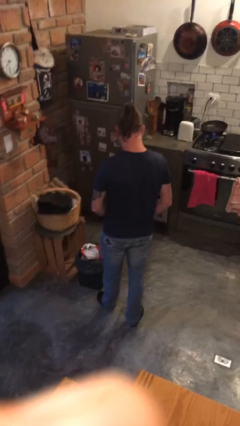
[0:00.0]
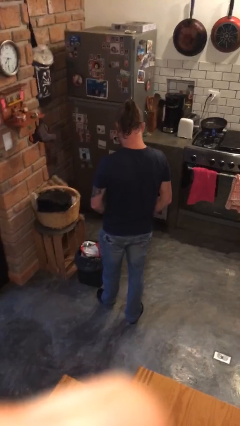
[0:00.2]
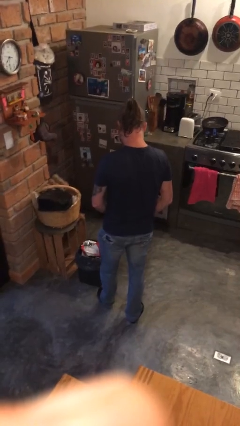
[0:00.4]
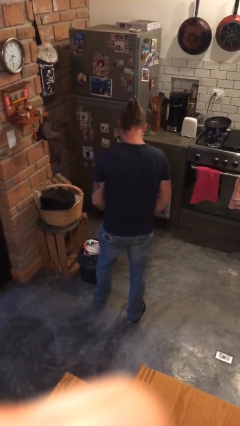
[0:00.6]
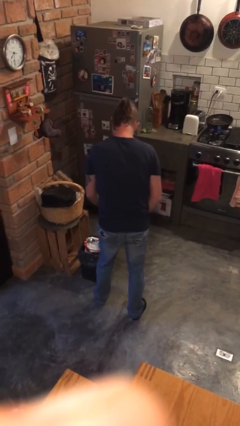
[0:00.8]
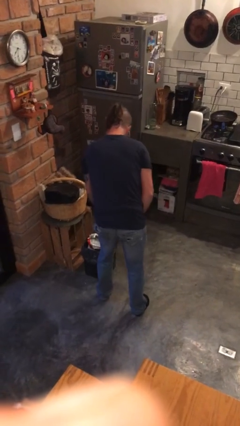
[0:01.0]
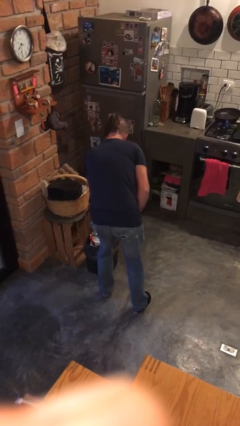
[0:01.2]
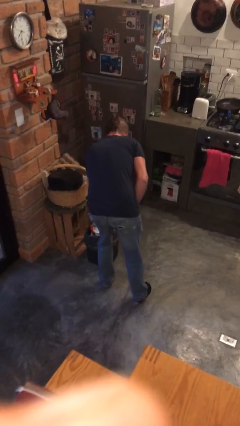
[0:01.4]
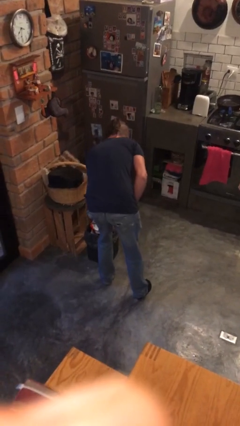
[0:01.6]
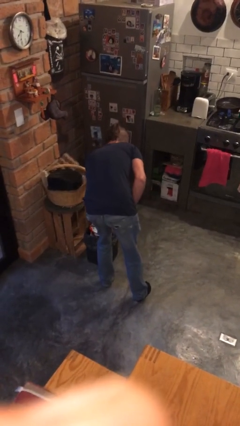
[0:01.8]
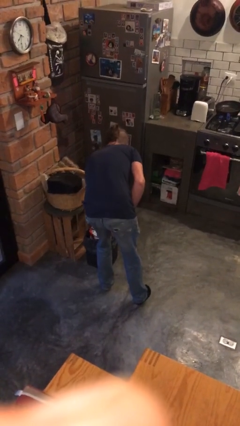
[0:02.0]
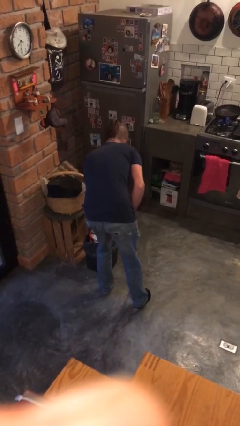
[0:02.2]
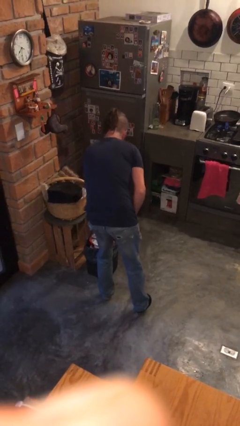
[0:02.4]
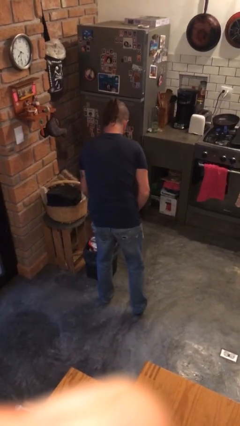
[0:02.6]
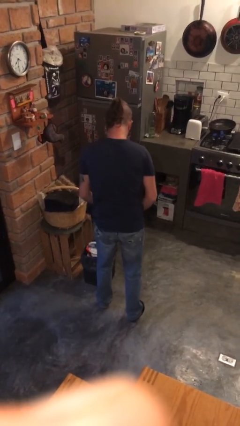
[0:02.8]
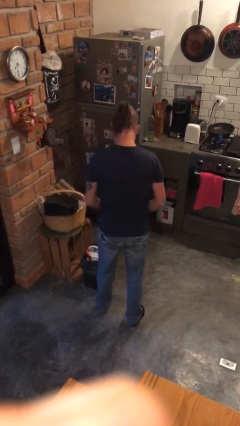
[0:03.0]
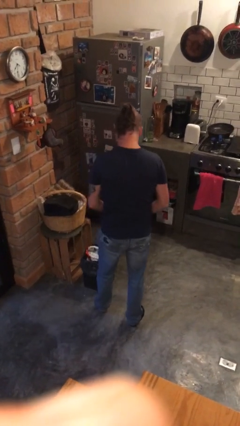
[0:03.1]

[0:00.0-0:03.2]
person discards trash

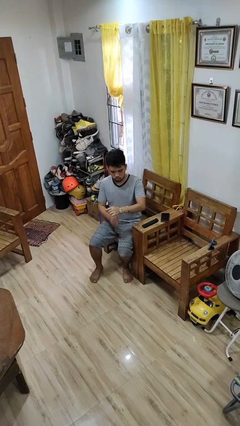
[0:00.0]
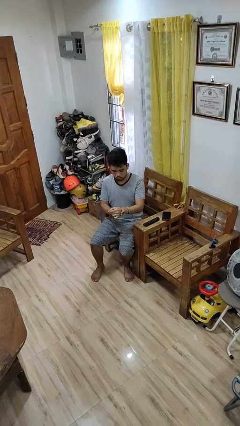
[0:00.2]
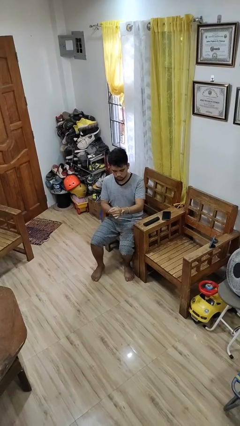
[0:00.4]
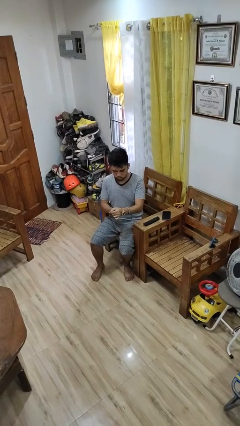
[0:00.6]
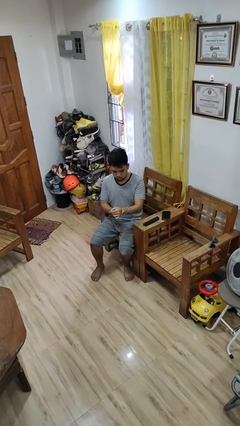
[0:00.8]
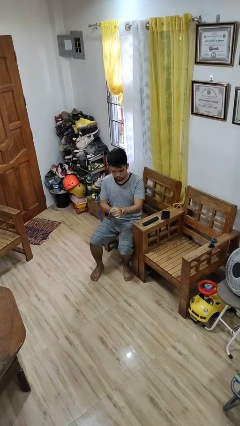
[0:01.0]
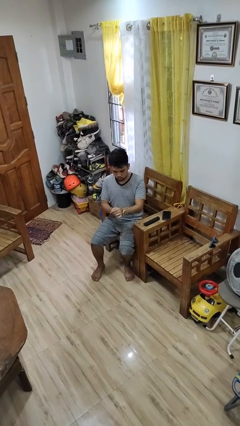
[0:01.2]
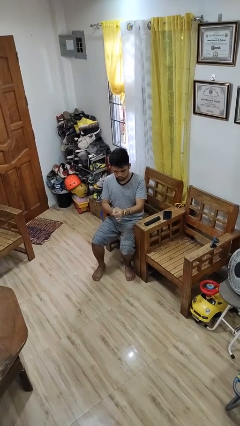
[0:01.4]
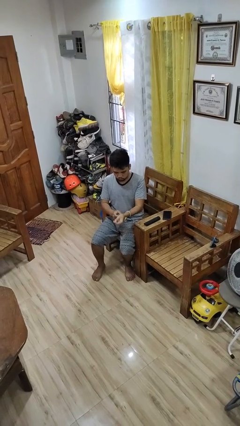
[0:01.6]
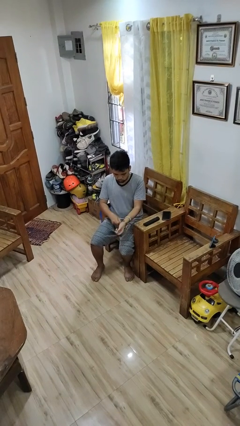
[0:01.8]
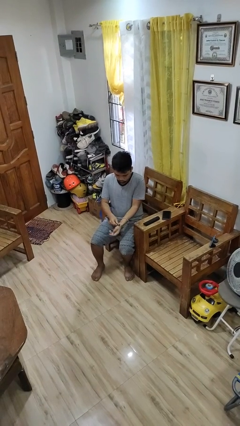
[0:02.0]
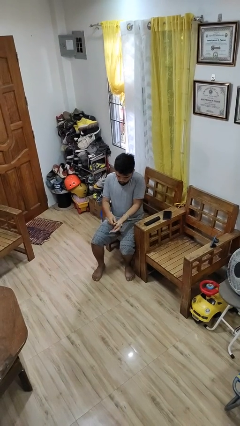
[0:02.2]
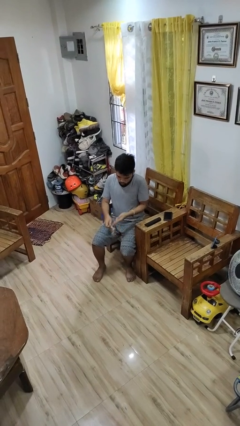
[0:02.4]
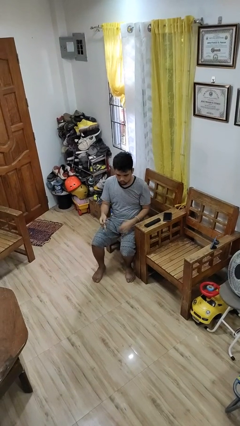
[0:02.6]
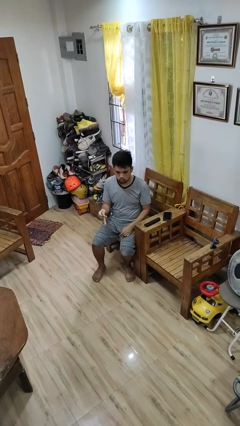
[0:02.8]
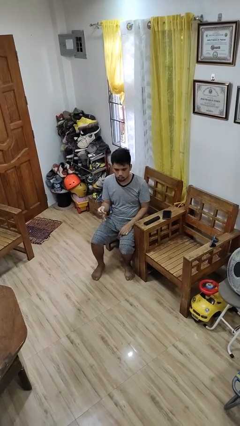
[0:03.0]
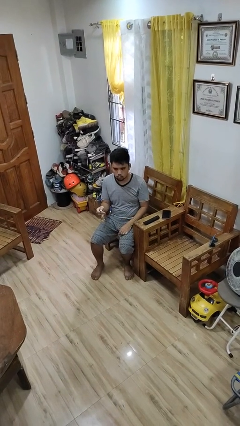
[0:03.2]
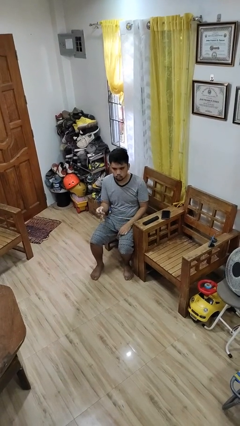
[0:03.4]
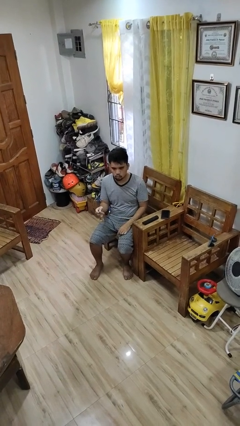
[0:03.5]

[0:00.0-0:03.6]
person takes off wristwatch

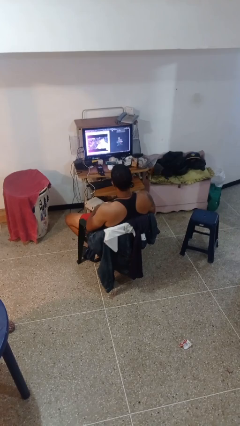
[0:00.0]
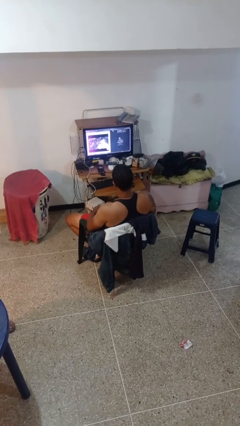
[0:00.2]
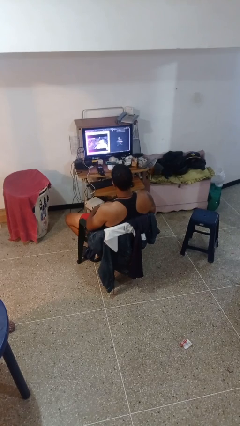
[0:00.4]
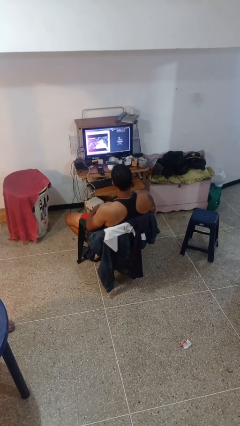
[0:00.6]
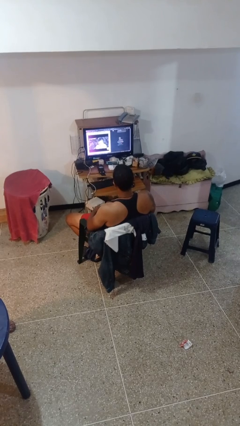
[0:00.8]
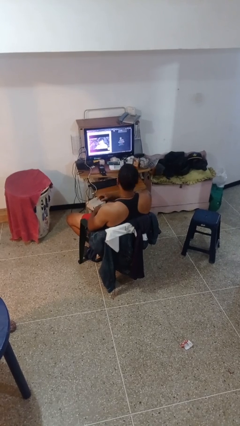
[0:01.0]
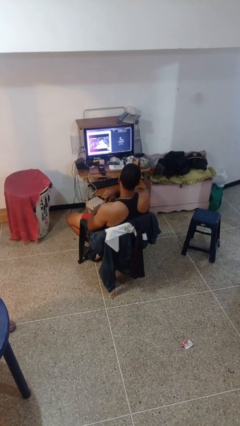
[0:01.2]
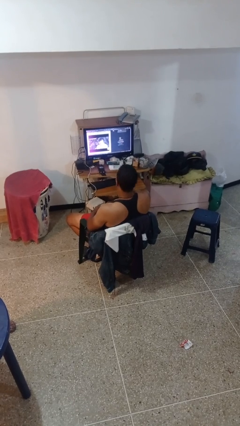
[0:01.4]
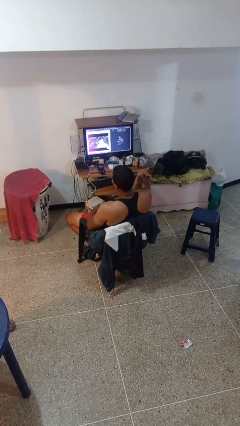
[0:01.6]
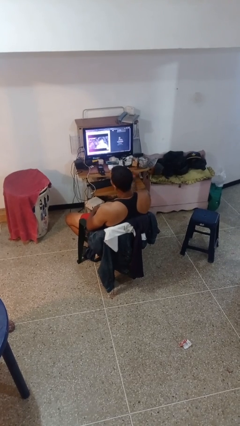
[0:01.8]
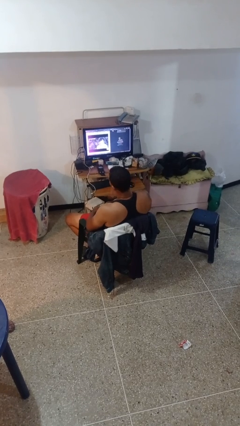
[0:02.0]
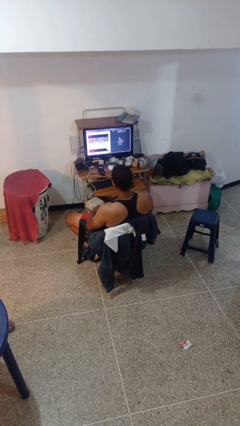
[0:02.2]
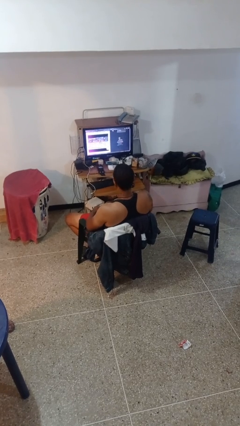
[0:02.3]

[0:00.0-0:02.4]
person gestures cut

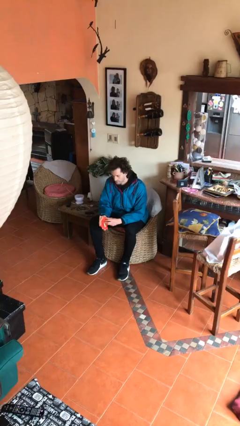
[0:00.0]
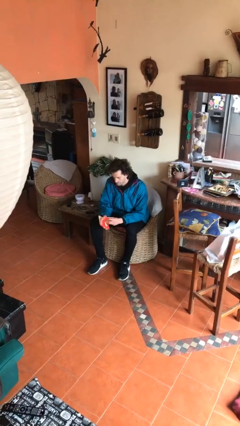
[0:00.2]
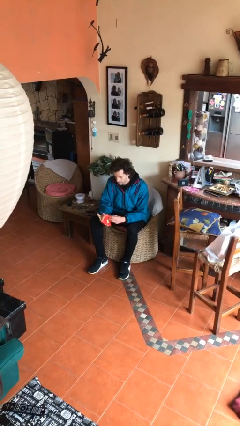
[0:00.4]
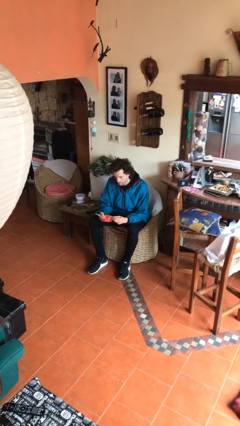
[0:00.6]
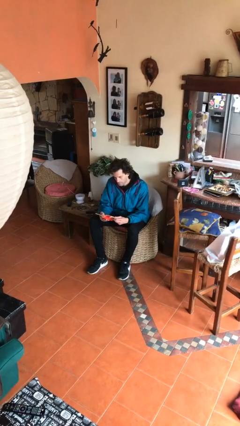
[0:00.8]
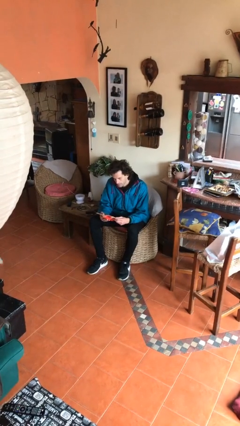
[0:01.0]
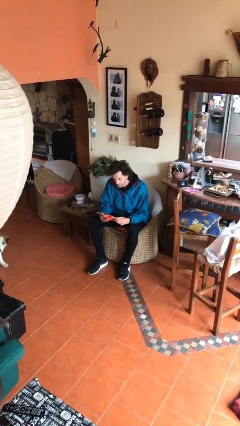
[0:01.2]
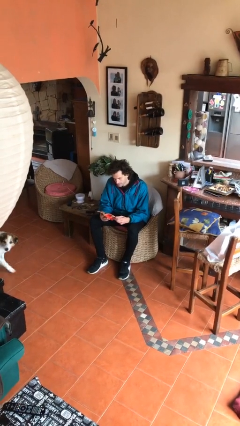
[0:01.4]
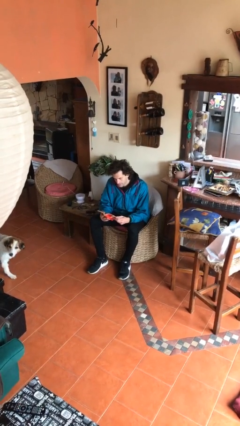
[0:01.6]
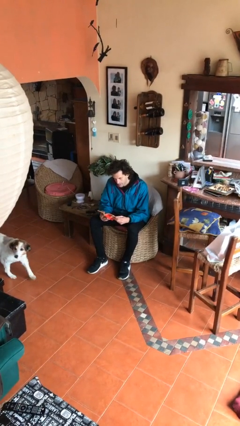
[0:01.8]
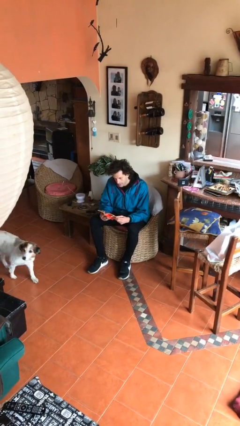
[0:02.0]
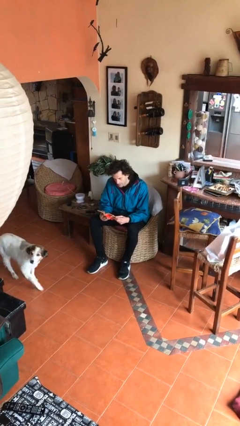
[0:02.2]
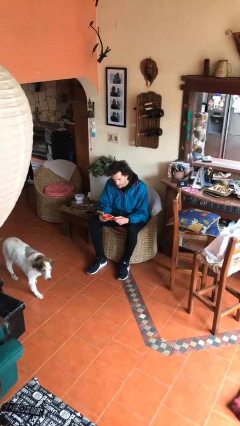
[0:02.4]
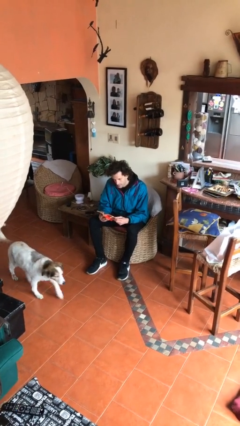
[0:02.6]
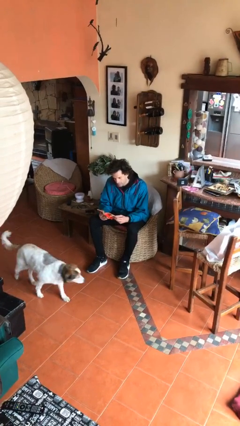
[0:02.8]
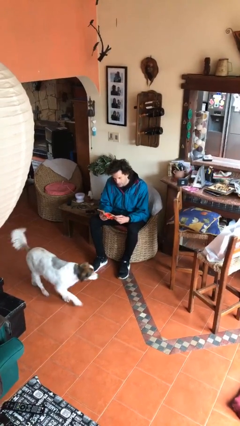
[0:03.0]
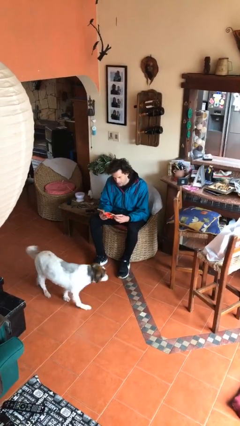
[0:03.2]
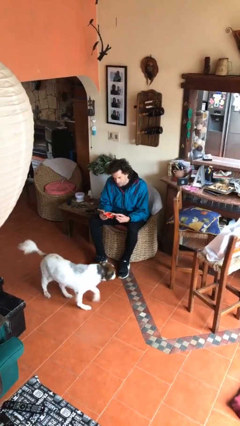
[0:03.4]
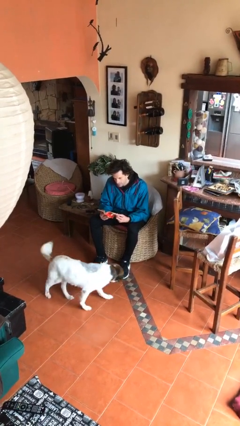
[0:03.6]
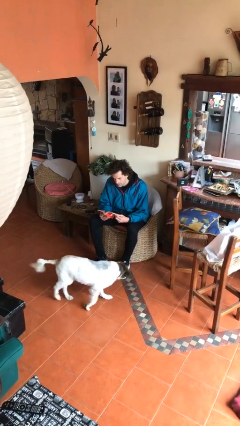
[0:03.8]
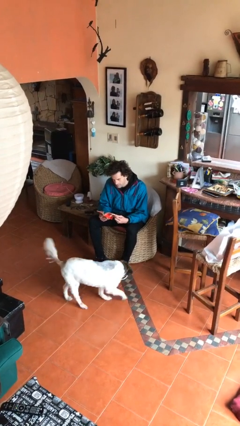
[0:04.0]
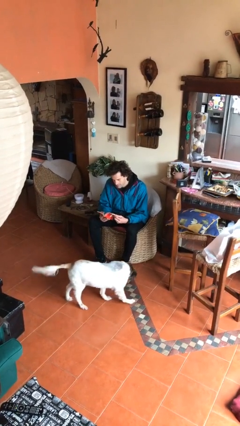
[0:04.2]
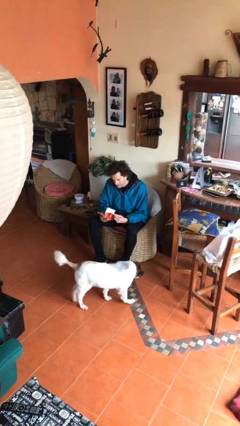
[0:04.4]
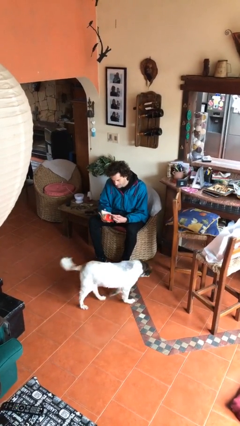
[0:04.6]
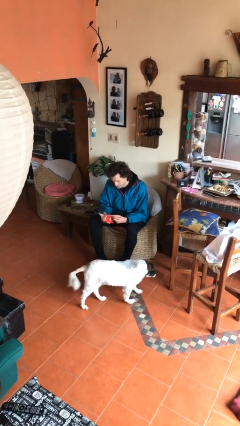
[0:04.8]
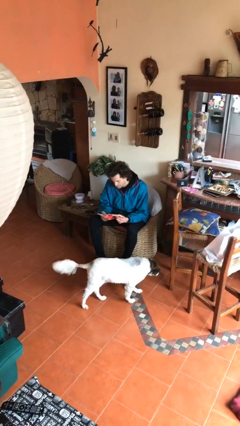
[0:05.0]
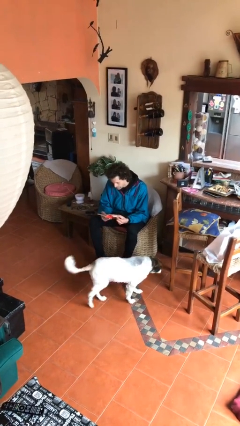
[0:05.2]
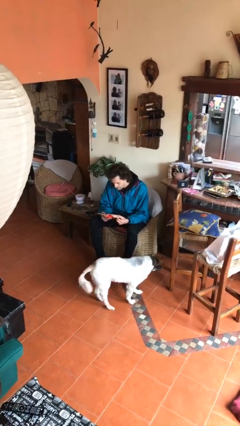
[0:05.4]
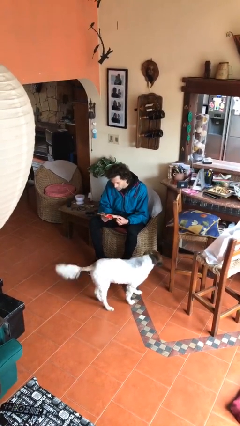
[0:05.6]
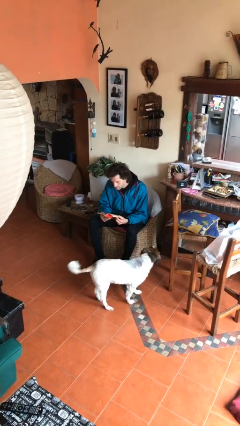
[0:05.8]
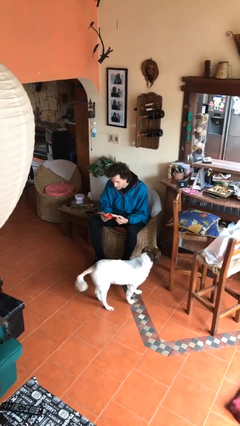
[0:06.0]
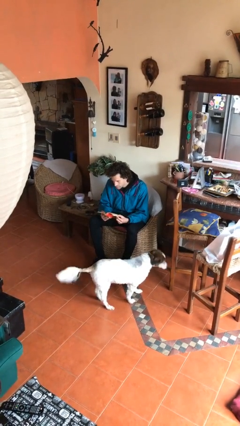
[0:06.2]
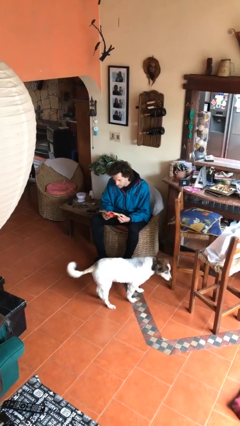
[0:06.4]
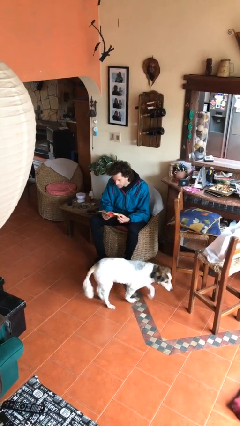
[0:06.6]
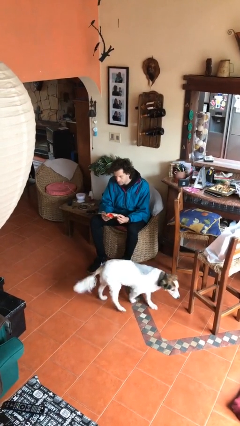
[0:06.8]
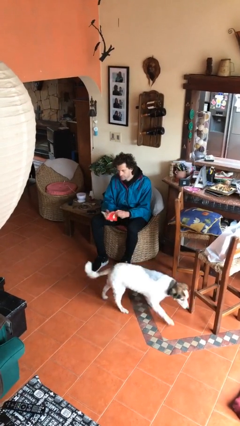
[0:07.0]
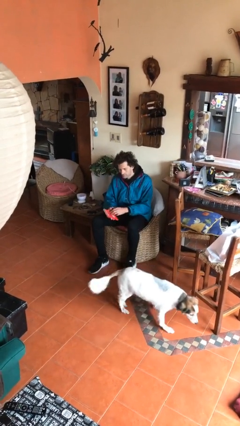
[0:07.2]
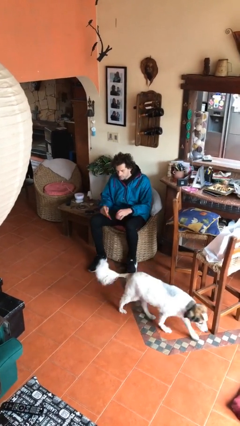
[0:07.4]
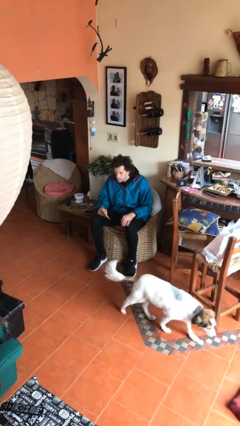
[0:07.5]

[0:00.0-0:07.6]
person reads document

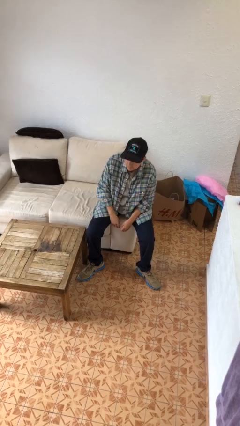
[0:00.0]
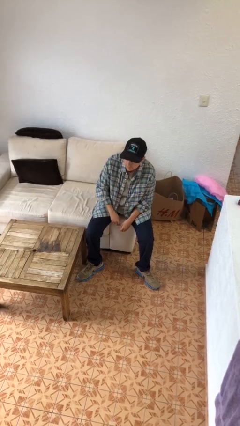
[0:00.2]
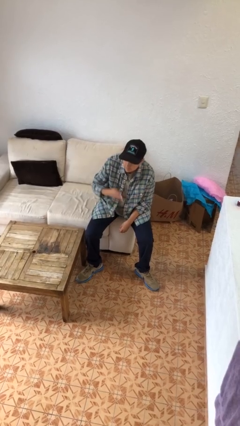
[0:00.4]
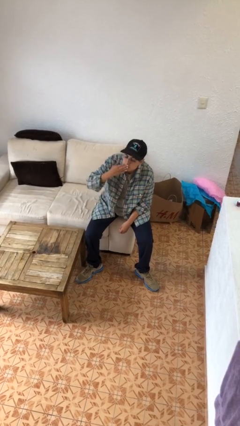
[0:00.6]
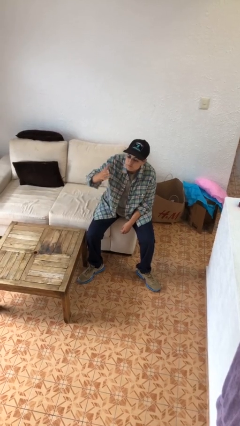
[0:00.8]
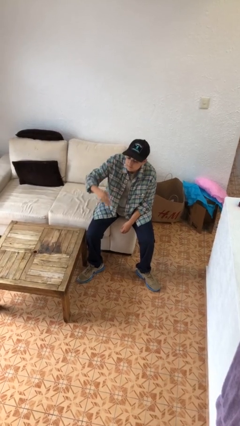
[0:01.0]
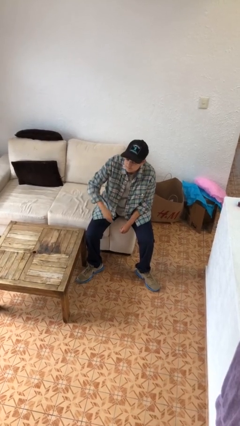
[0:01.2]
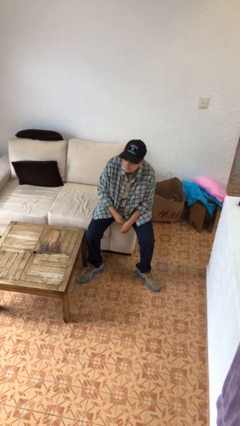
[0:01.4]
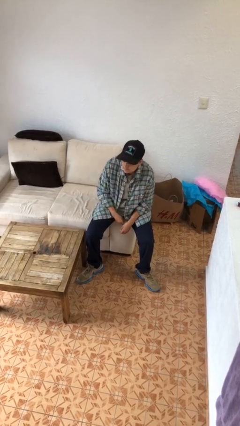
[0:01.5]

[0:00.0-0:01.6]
person gestures blow kiss
